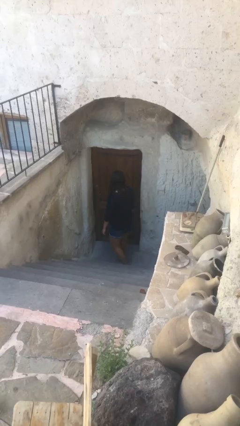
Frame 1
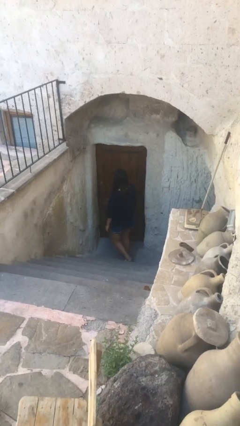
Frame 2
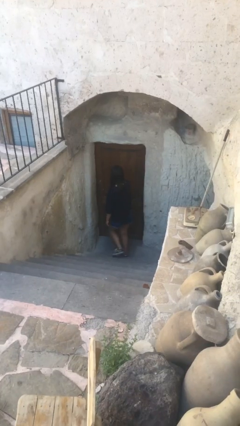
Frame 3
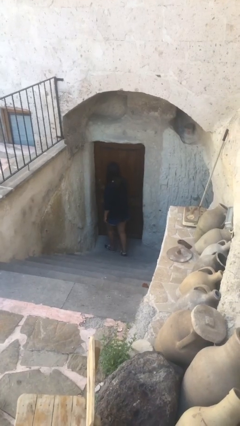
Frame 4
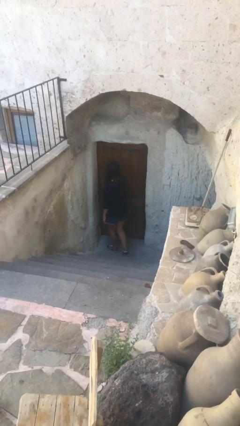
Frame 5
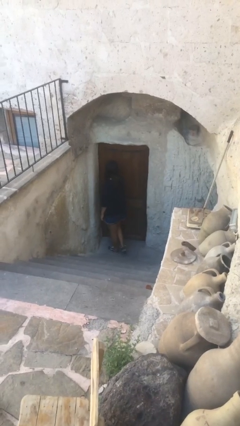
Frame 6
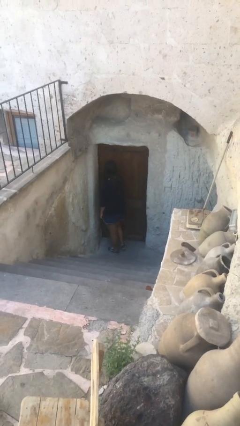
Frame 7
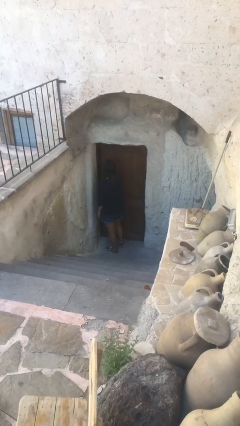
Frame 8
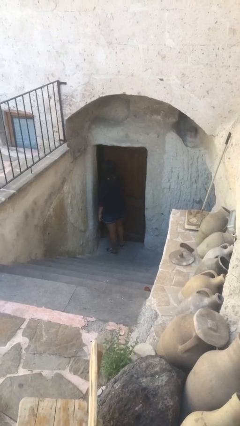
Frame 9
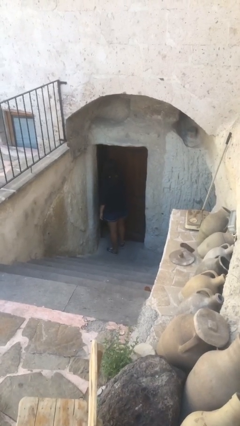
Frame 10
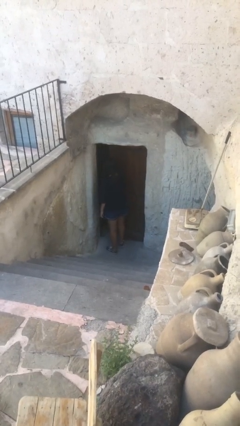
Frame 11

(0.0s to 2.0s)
person opens facility door

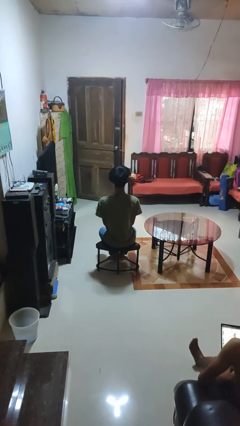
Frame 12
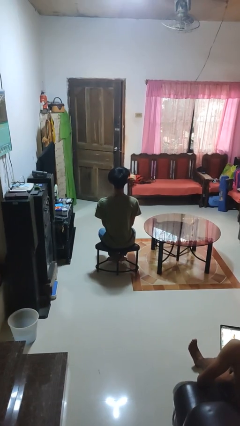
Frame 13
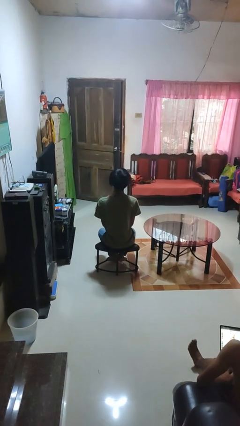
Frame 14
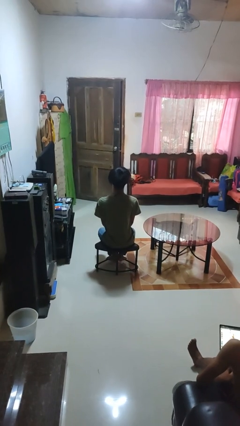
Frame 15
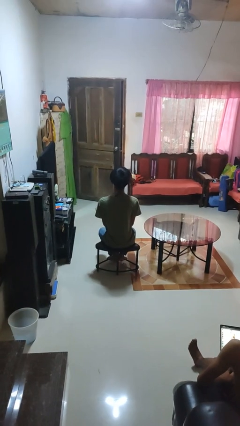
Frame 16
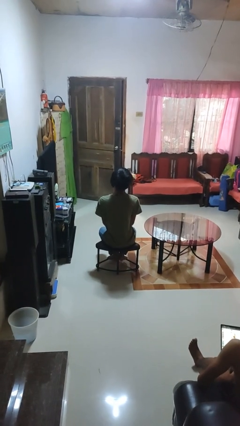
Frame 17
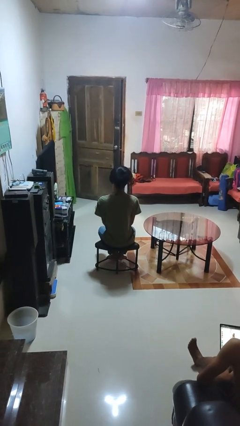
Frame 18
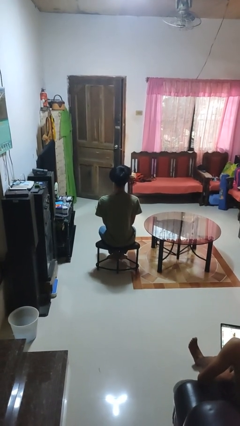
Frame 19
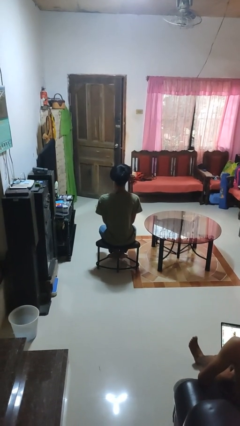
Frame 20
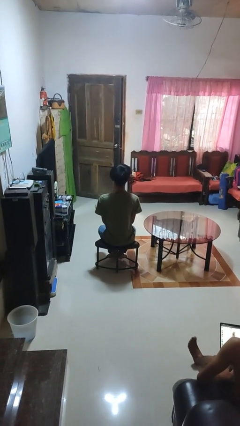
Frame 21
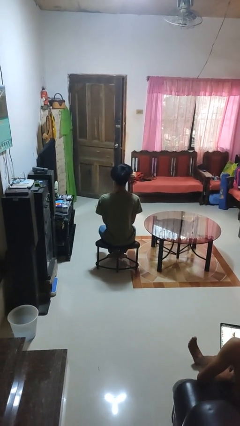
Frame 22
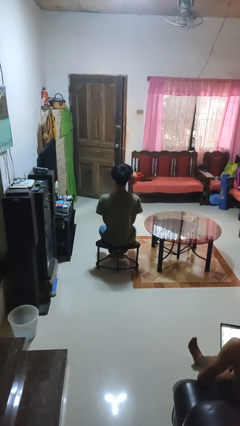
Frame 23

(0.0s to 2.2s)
person nods head

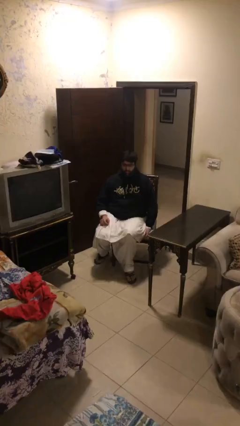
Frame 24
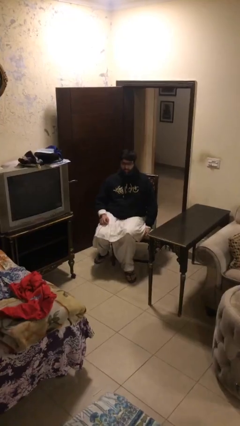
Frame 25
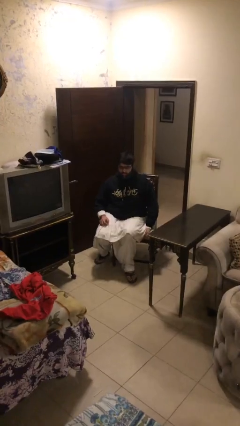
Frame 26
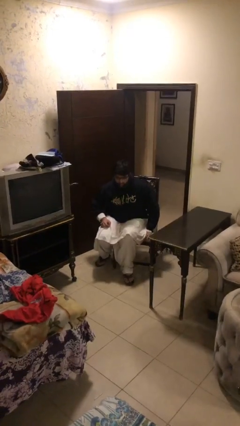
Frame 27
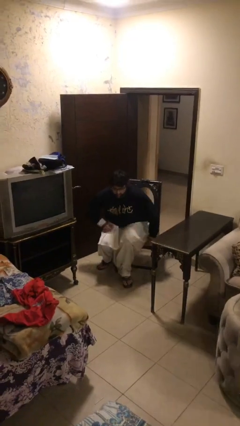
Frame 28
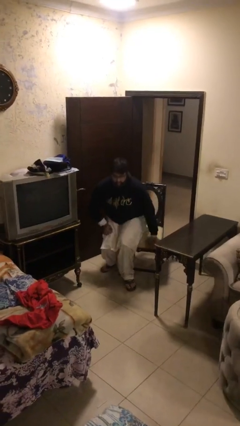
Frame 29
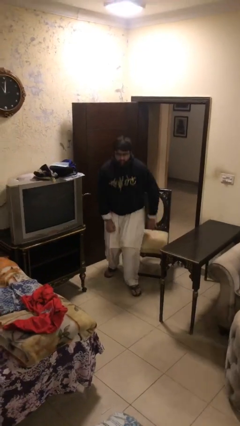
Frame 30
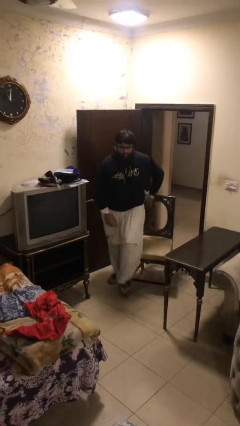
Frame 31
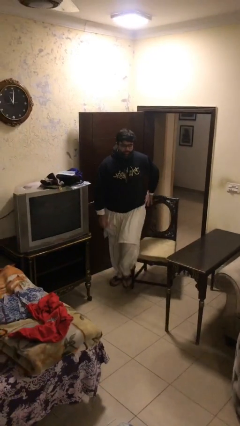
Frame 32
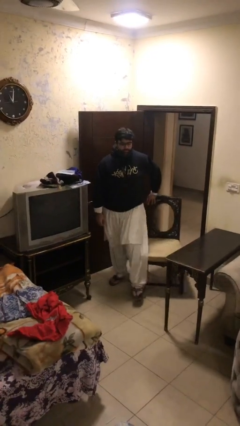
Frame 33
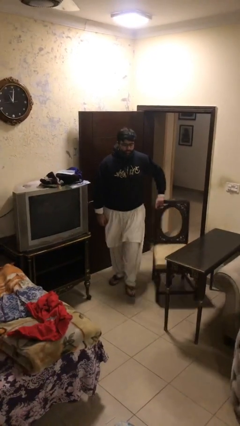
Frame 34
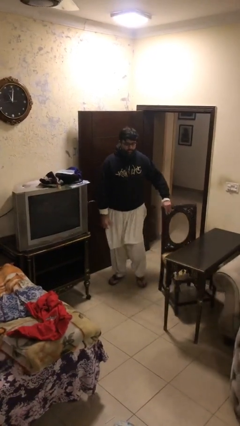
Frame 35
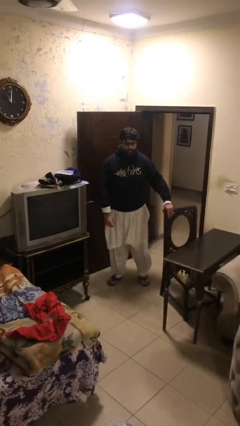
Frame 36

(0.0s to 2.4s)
person stands up

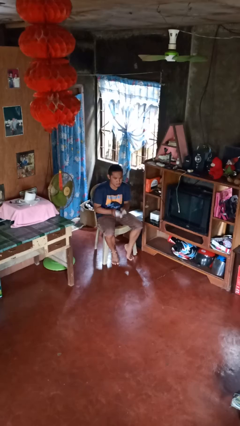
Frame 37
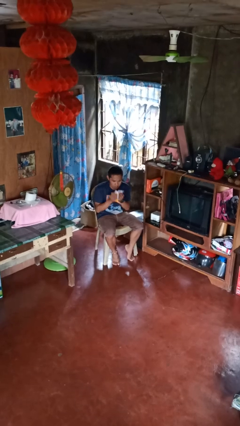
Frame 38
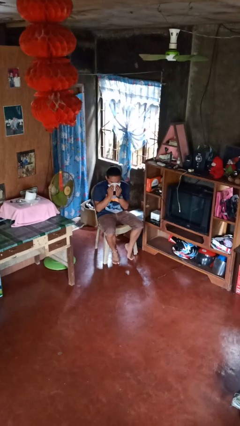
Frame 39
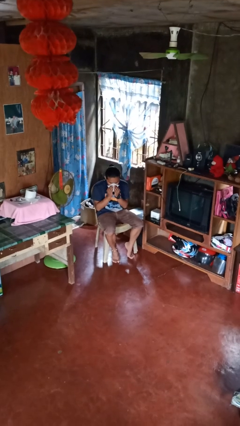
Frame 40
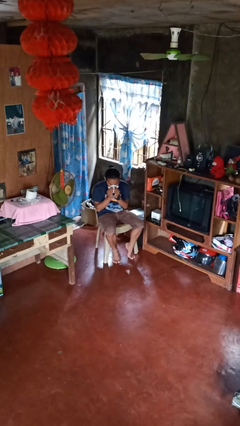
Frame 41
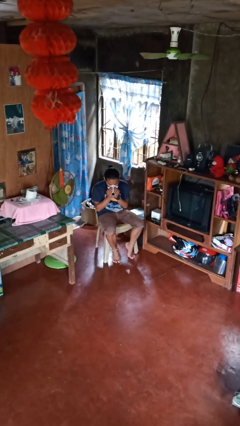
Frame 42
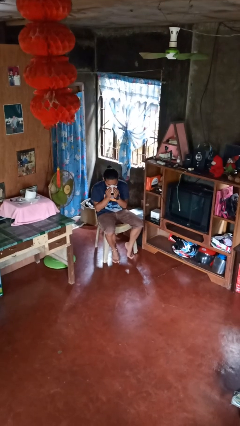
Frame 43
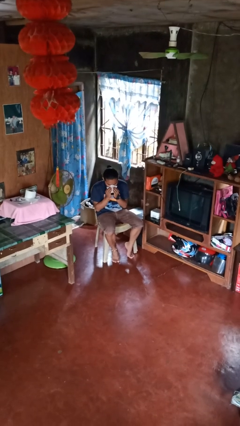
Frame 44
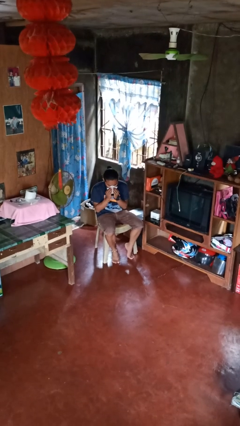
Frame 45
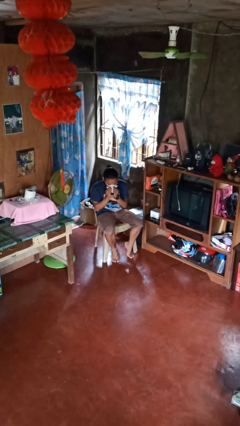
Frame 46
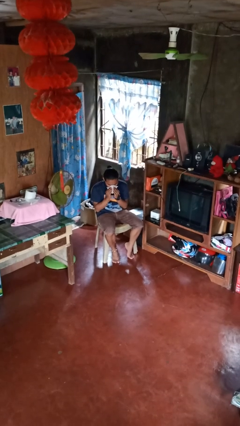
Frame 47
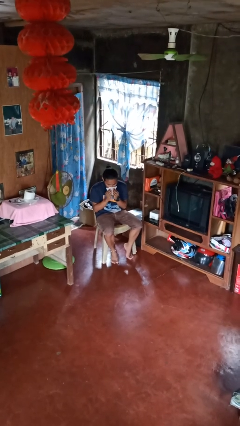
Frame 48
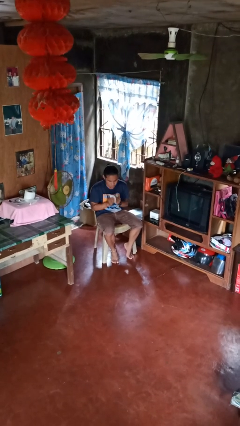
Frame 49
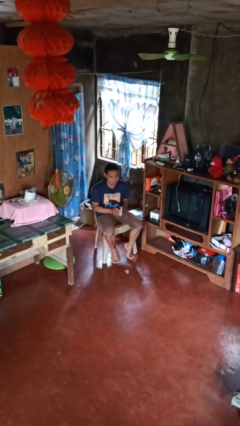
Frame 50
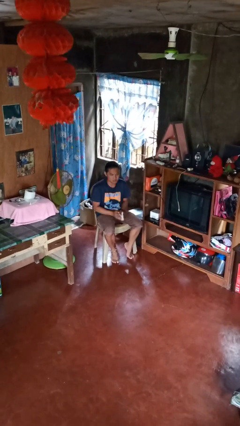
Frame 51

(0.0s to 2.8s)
person blows nose

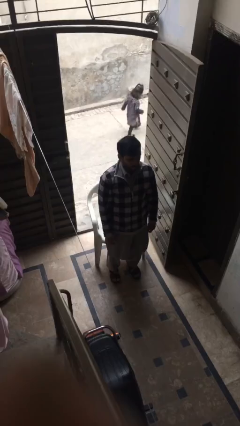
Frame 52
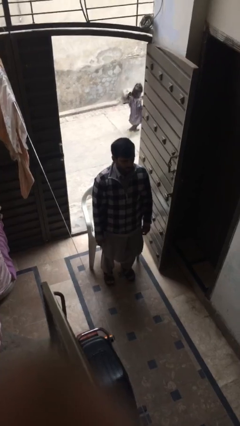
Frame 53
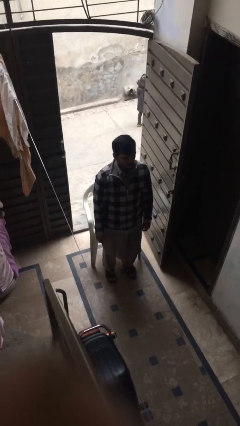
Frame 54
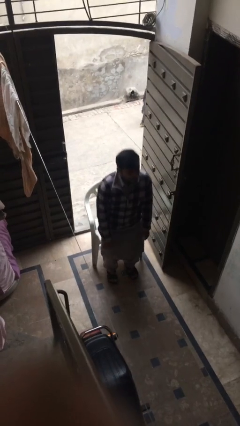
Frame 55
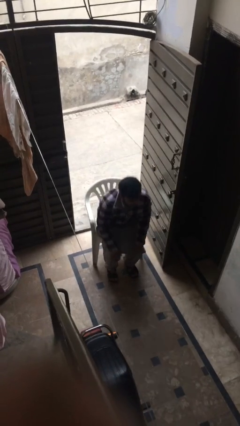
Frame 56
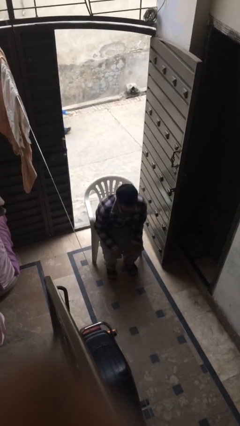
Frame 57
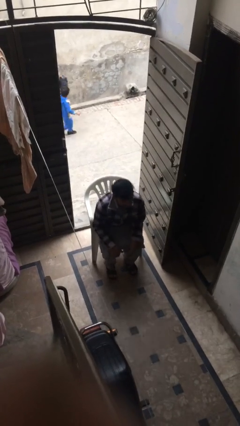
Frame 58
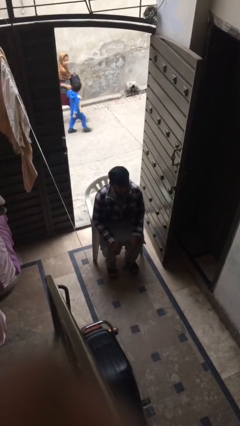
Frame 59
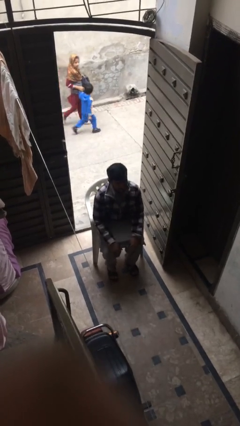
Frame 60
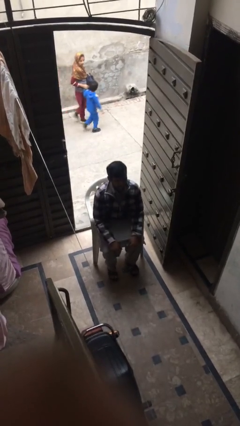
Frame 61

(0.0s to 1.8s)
person sits down

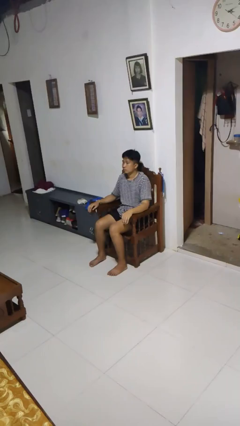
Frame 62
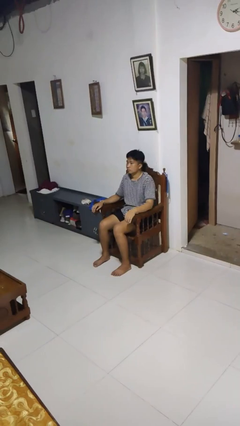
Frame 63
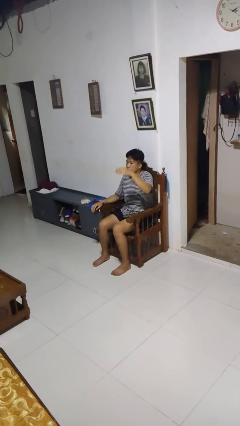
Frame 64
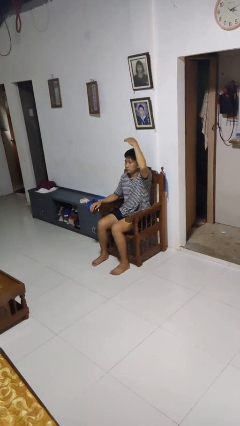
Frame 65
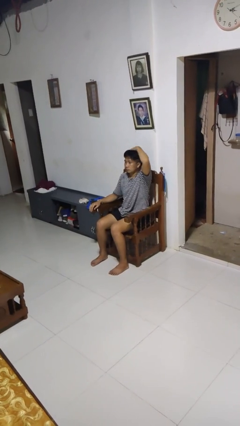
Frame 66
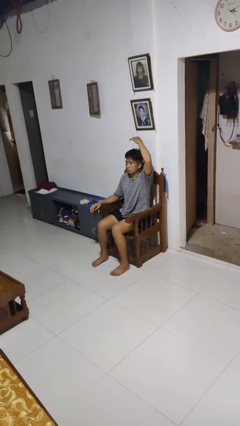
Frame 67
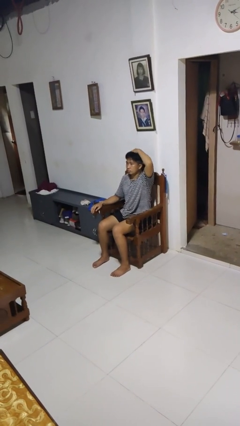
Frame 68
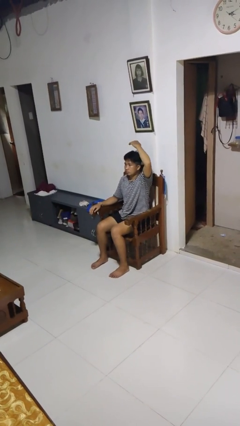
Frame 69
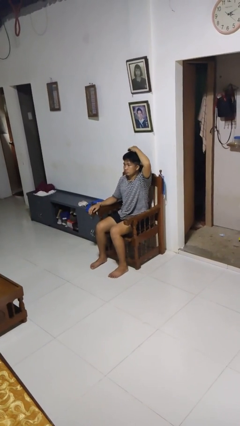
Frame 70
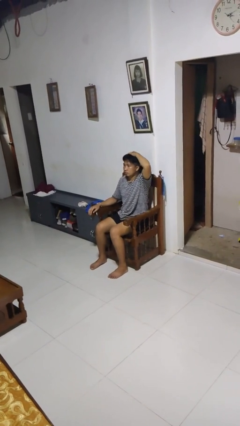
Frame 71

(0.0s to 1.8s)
person pats head

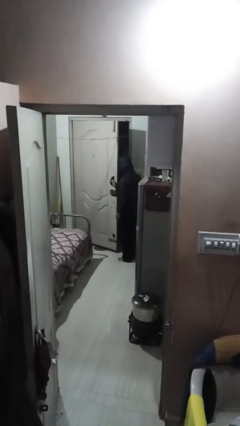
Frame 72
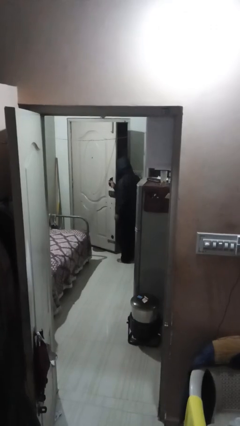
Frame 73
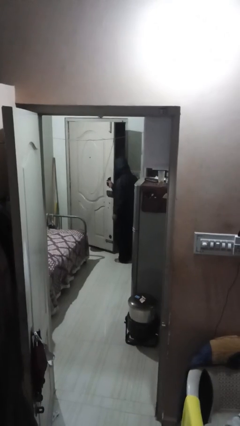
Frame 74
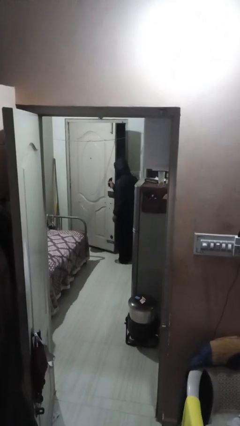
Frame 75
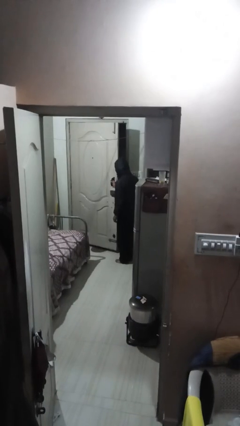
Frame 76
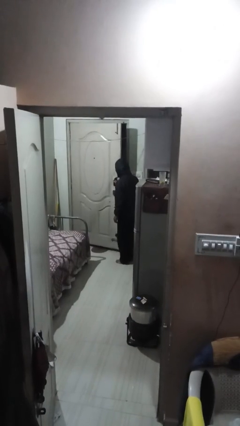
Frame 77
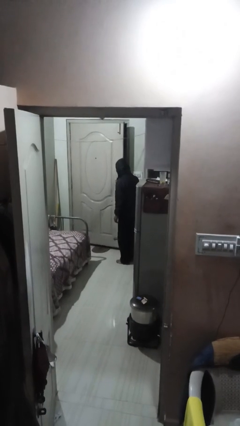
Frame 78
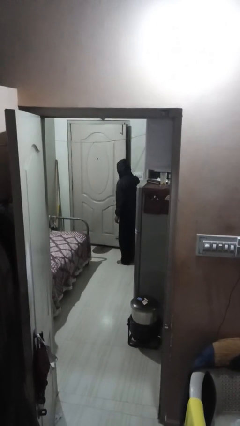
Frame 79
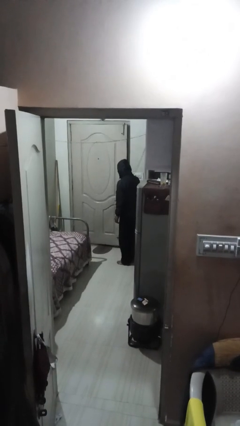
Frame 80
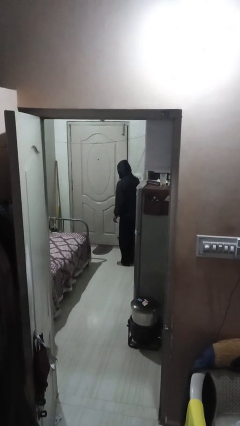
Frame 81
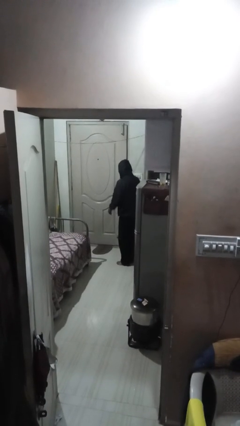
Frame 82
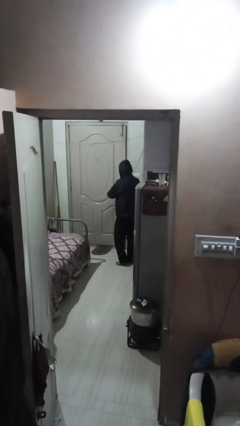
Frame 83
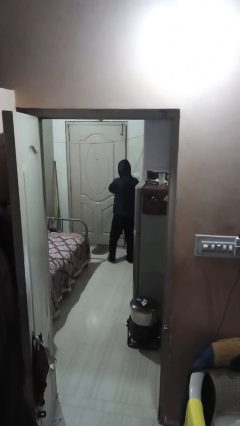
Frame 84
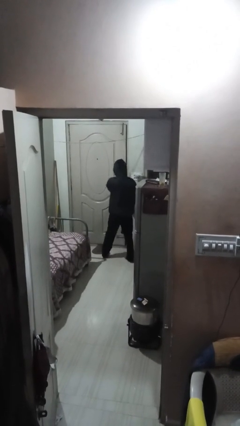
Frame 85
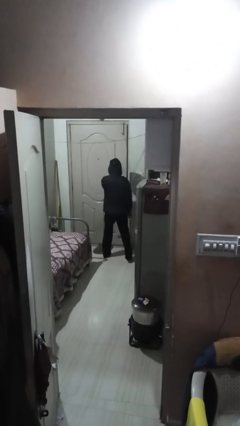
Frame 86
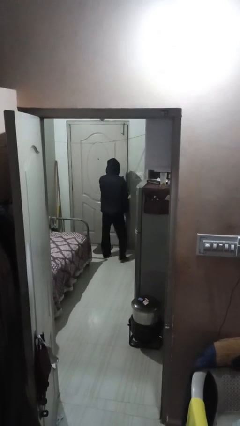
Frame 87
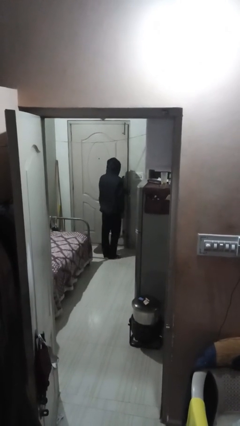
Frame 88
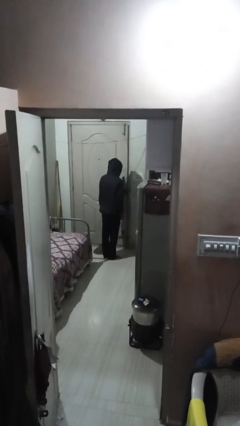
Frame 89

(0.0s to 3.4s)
person closes facility door

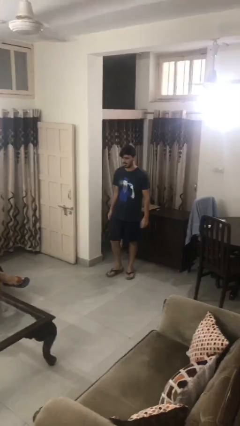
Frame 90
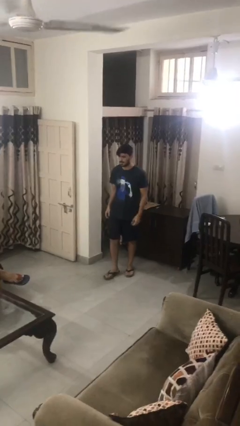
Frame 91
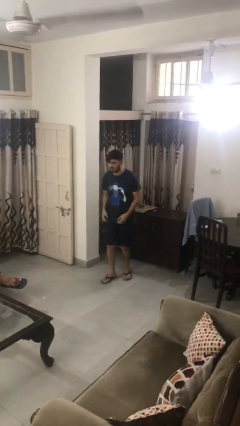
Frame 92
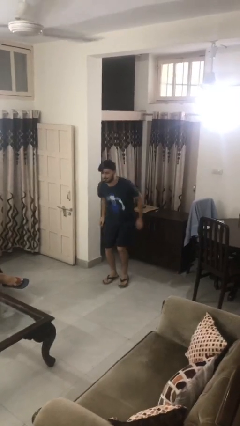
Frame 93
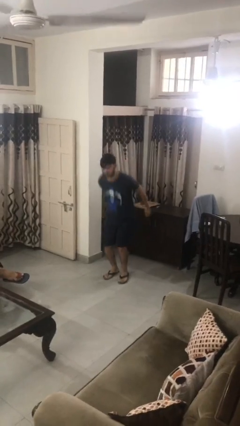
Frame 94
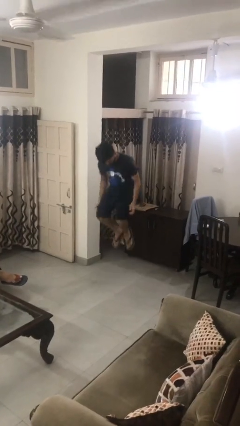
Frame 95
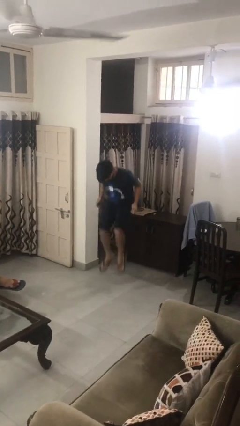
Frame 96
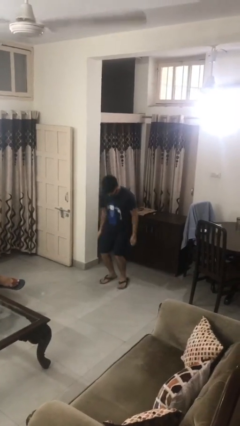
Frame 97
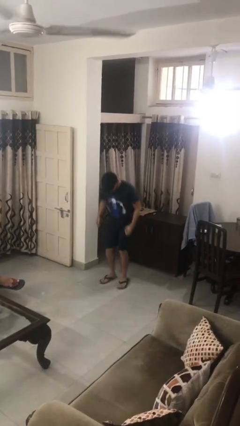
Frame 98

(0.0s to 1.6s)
person jumps
